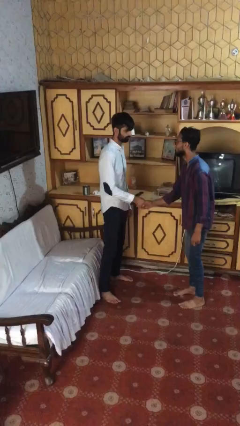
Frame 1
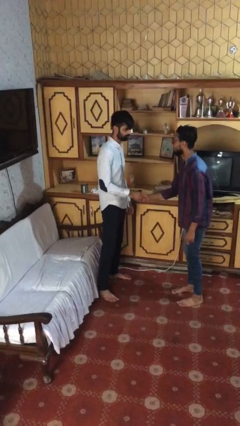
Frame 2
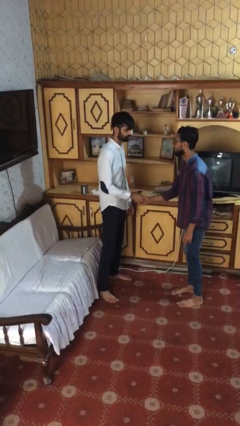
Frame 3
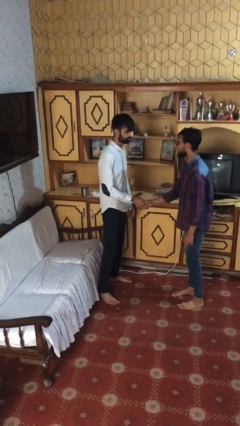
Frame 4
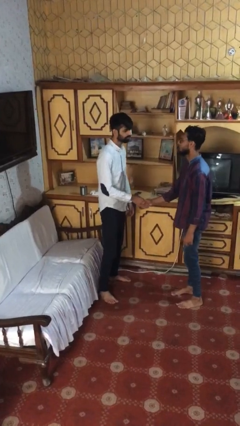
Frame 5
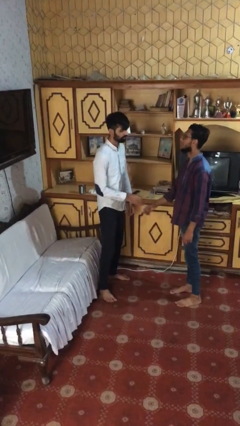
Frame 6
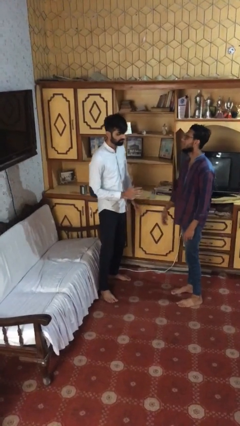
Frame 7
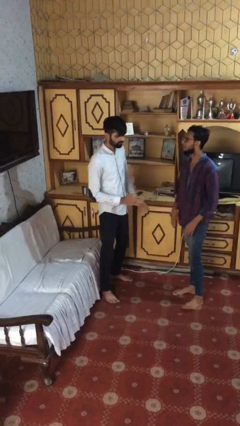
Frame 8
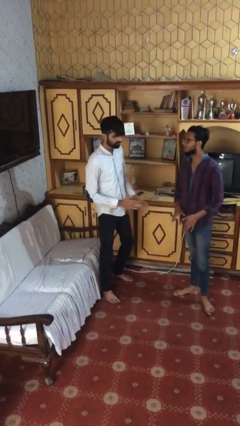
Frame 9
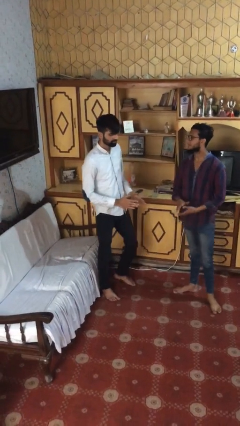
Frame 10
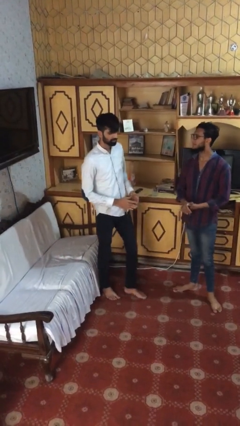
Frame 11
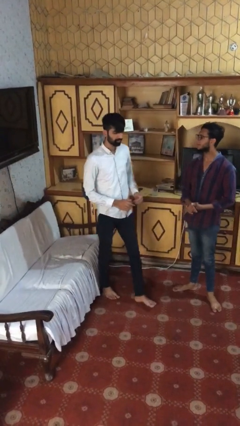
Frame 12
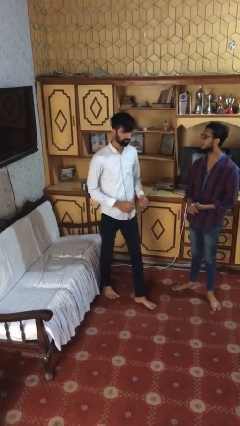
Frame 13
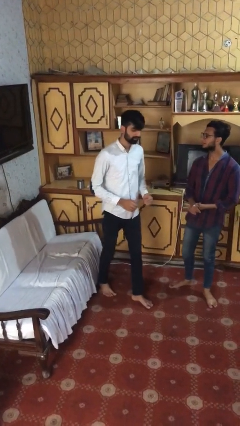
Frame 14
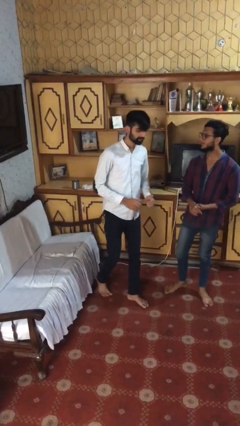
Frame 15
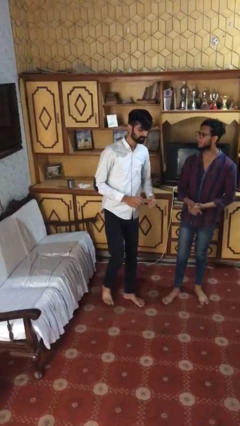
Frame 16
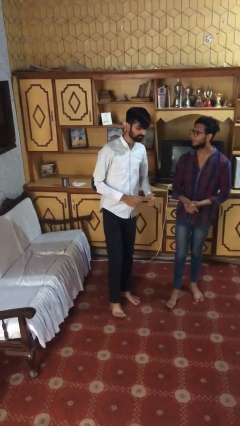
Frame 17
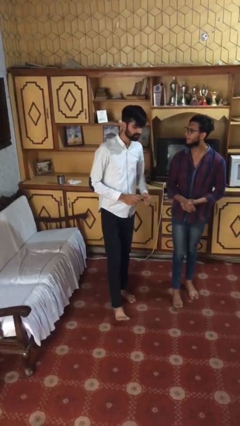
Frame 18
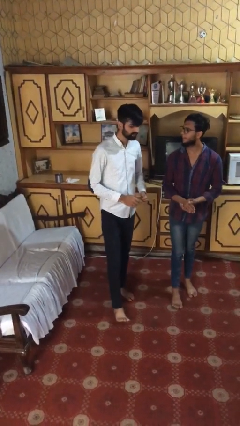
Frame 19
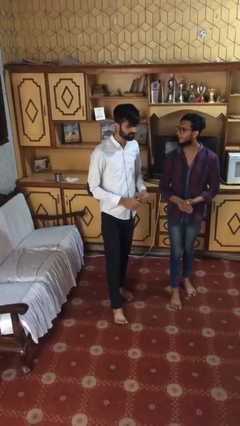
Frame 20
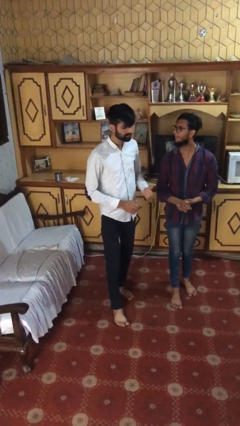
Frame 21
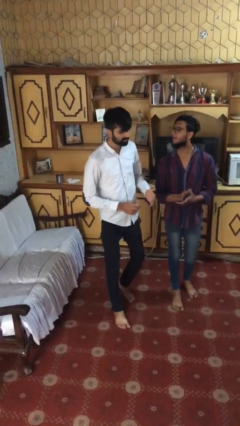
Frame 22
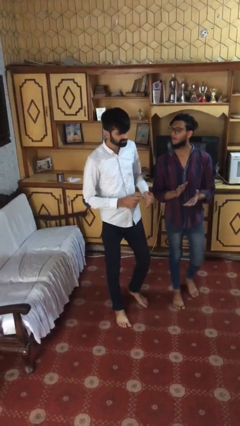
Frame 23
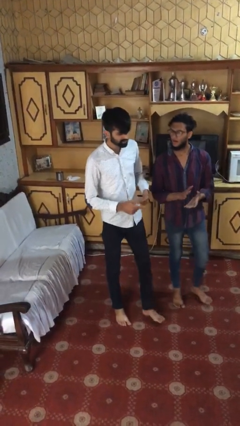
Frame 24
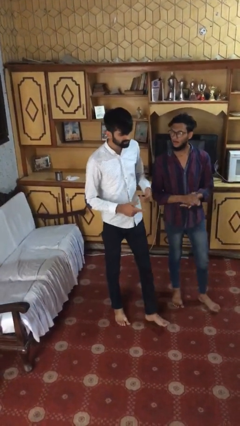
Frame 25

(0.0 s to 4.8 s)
person talks to person

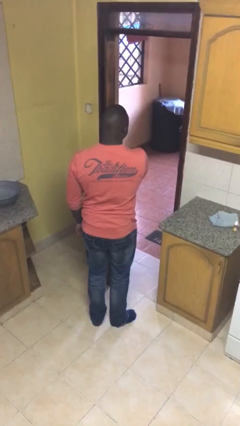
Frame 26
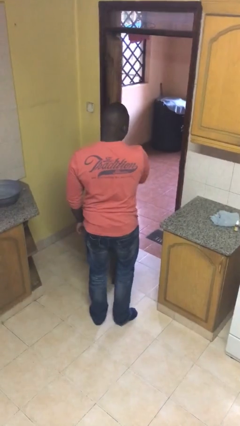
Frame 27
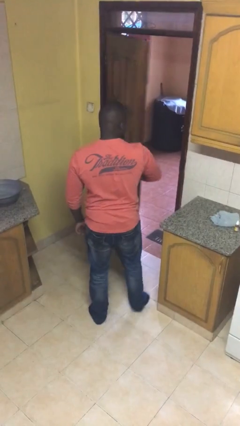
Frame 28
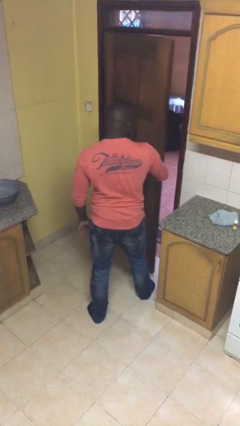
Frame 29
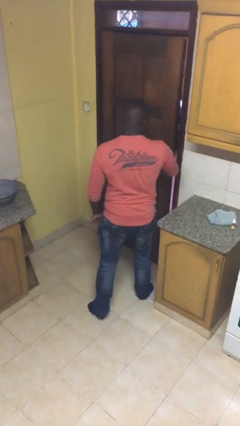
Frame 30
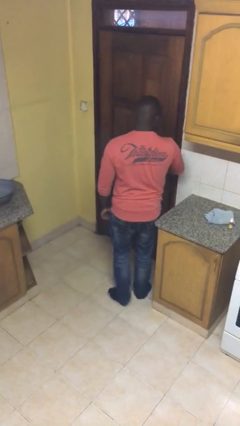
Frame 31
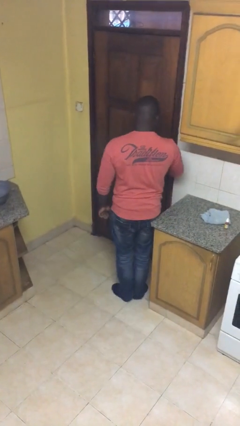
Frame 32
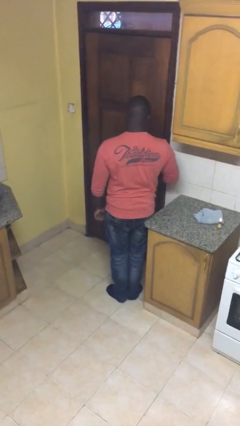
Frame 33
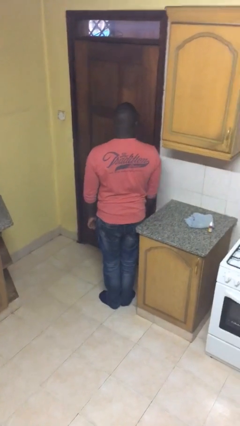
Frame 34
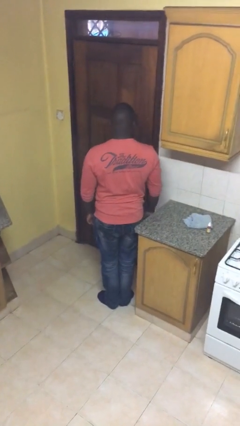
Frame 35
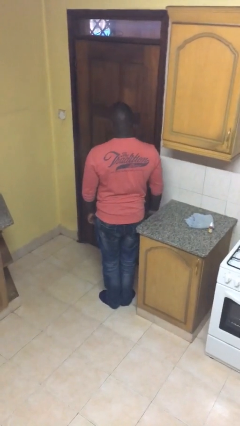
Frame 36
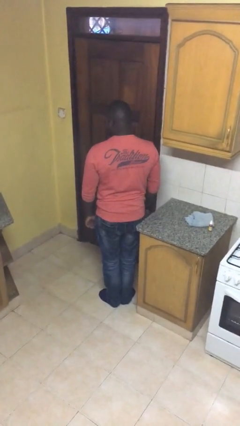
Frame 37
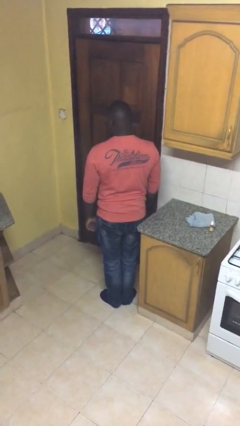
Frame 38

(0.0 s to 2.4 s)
person closes facility door

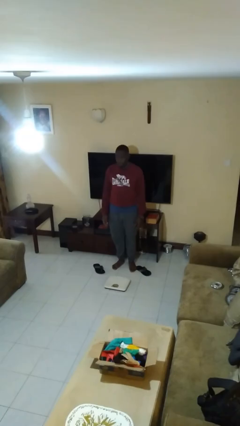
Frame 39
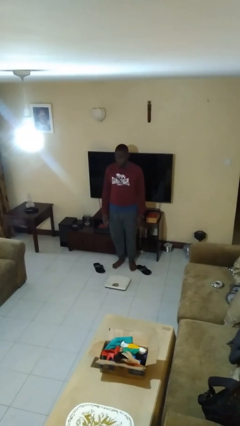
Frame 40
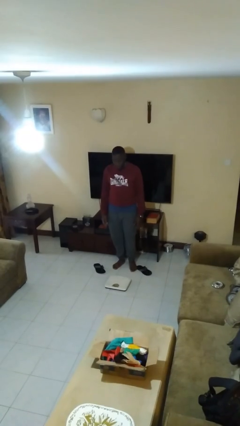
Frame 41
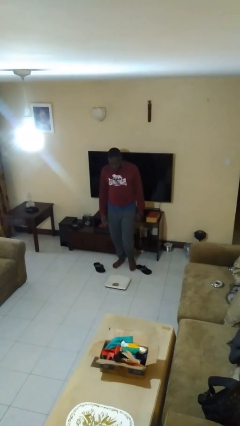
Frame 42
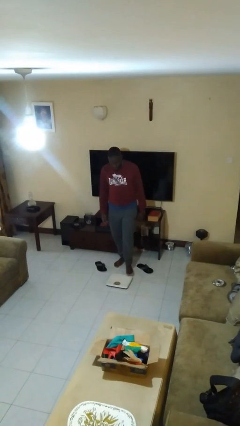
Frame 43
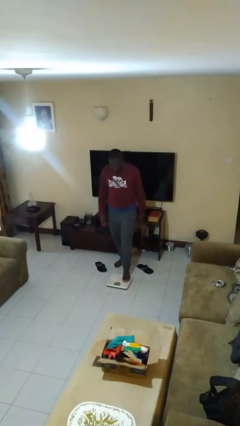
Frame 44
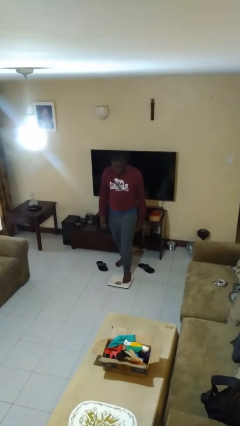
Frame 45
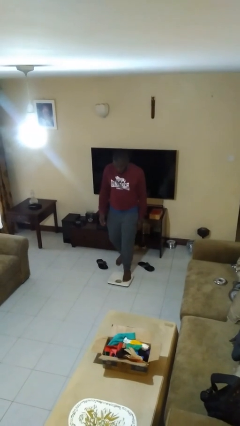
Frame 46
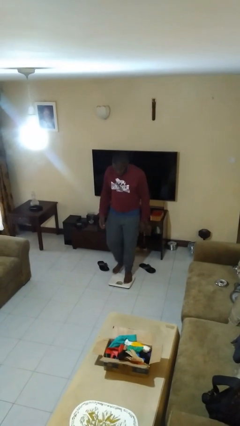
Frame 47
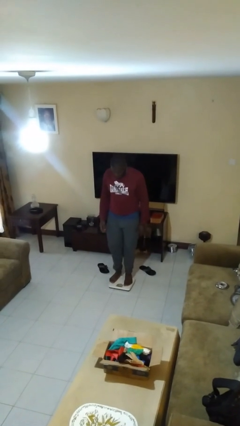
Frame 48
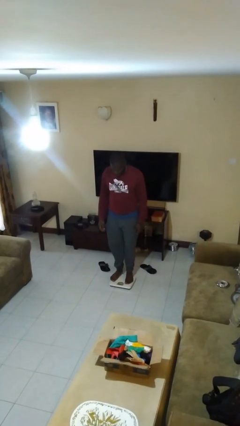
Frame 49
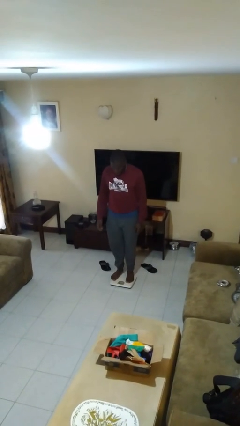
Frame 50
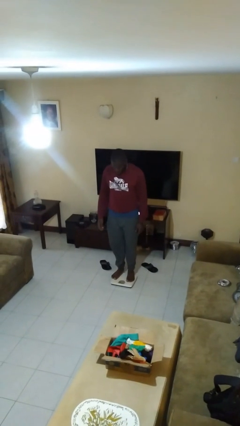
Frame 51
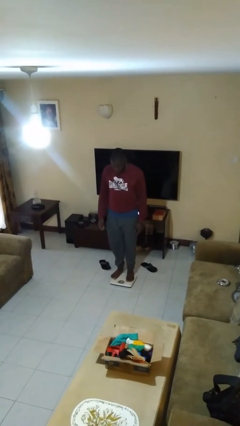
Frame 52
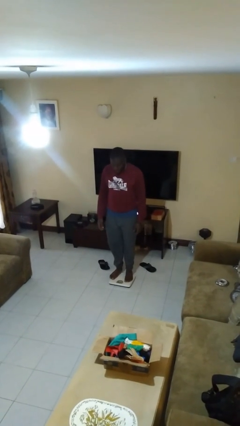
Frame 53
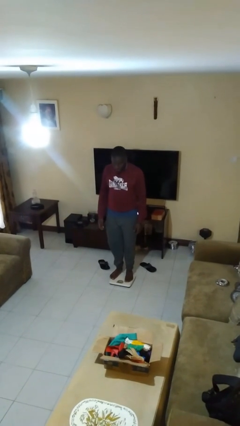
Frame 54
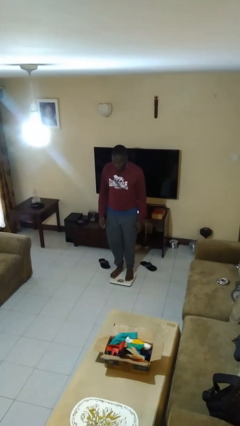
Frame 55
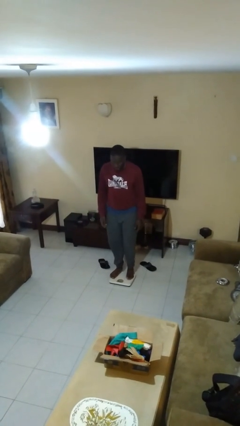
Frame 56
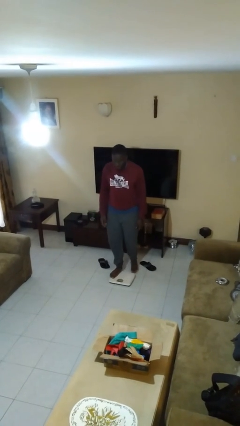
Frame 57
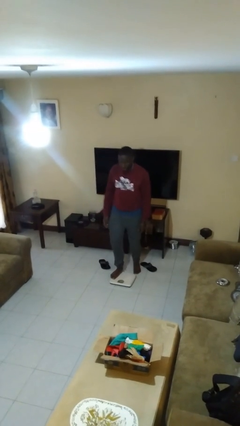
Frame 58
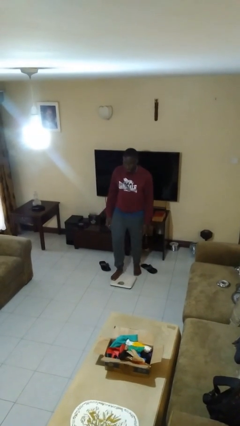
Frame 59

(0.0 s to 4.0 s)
person uses bodyweight scale

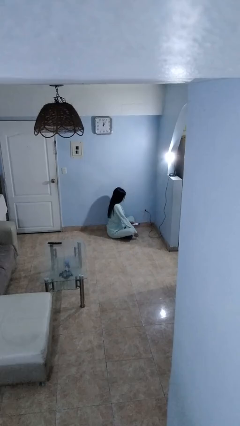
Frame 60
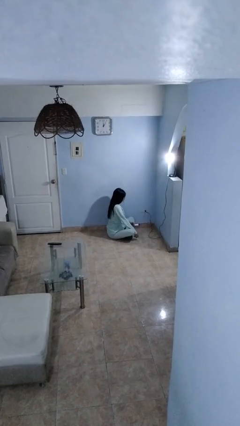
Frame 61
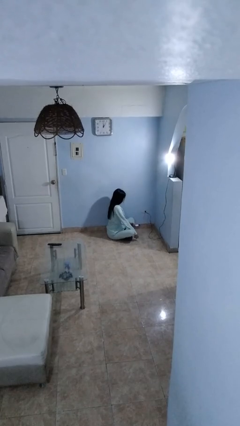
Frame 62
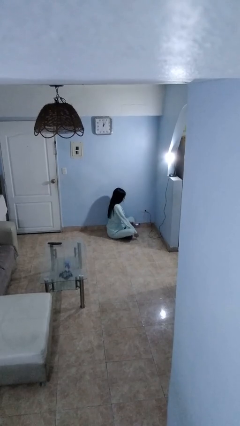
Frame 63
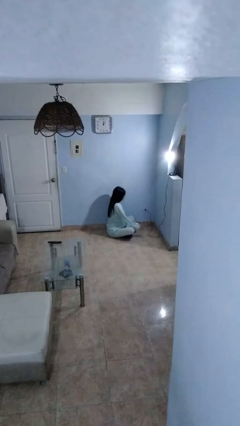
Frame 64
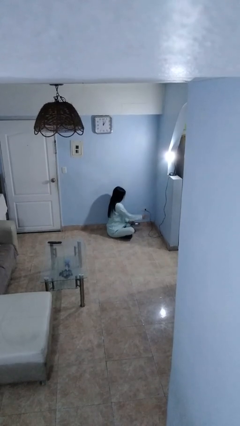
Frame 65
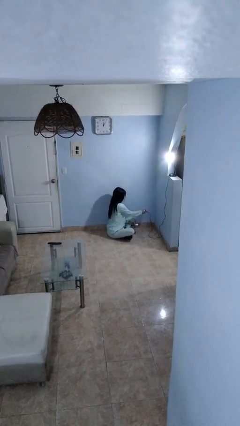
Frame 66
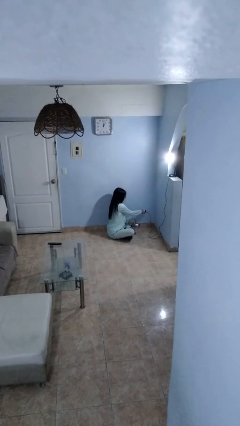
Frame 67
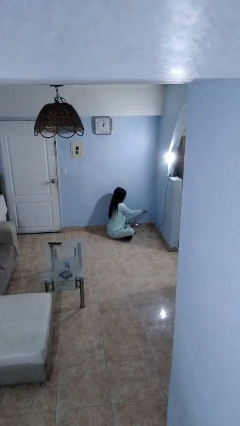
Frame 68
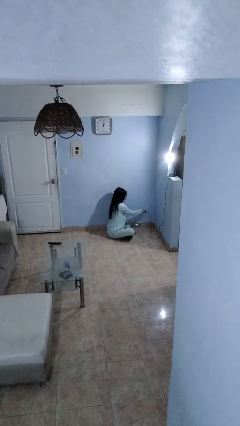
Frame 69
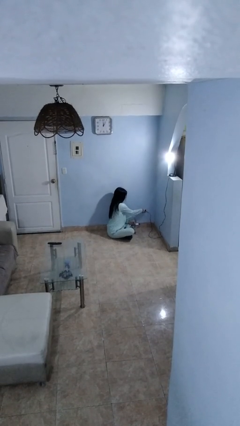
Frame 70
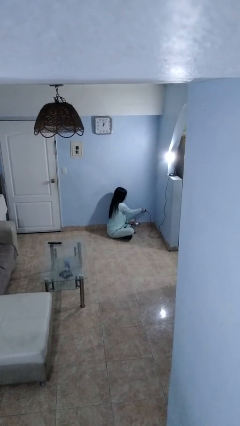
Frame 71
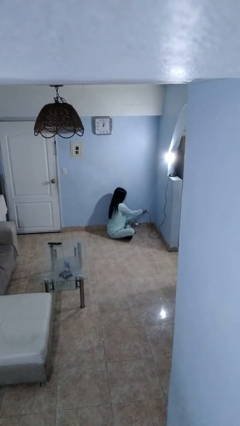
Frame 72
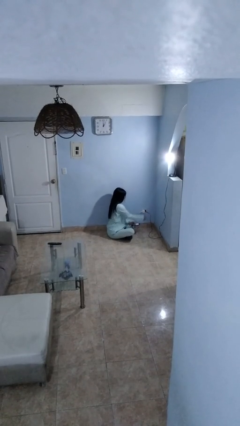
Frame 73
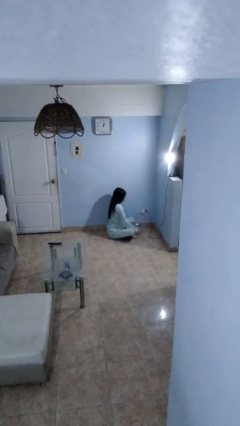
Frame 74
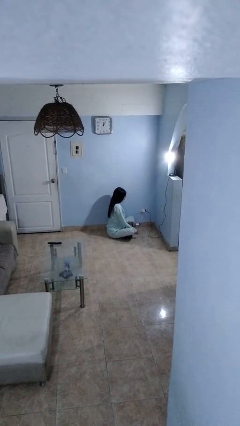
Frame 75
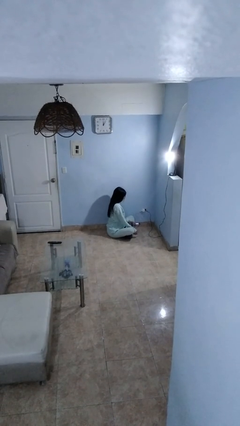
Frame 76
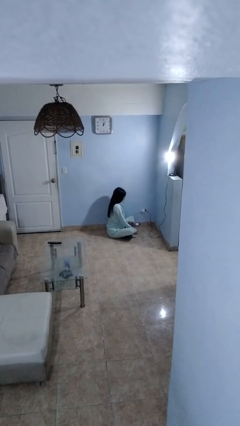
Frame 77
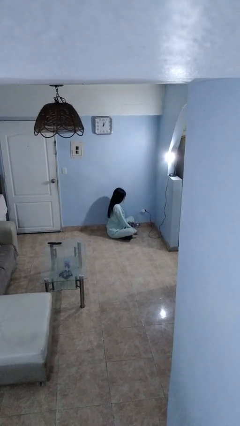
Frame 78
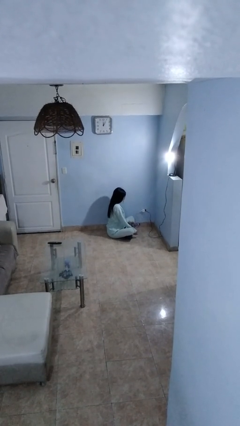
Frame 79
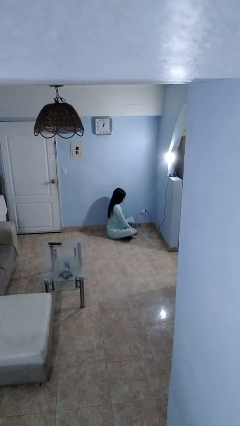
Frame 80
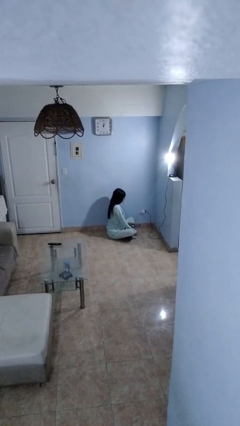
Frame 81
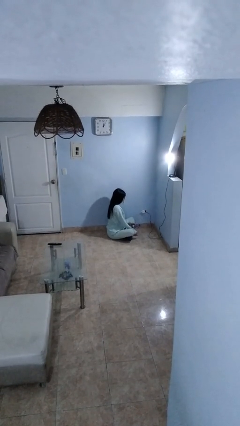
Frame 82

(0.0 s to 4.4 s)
person plugs into electrical socket

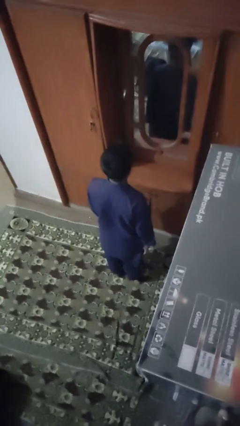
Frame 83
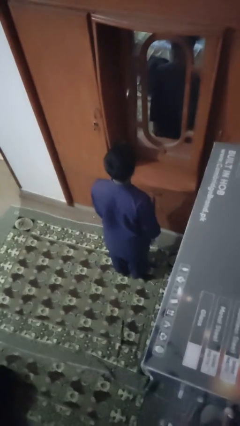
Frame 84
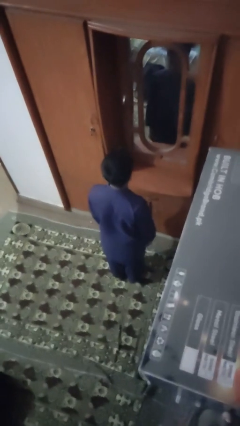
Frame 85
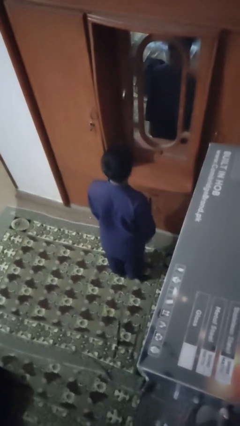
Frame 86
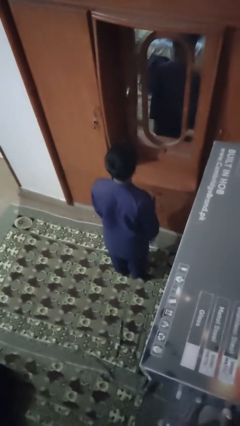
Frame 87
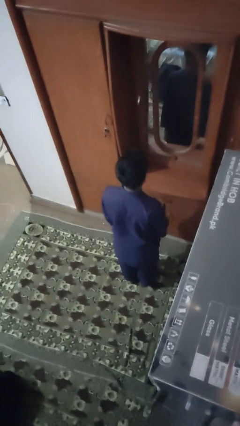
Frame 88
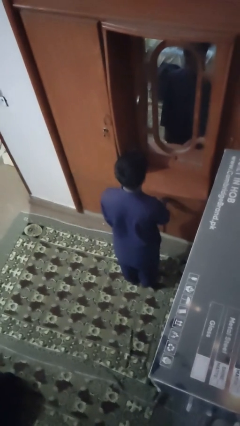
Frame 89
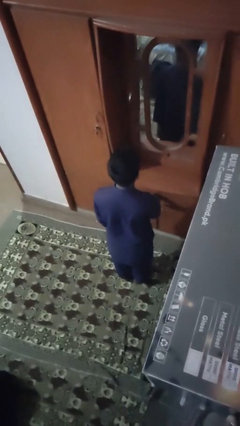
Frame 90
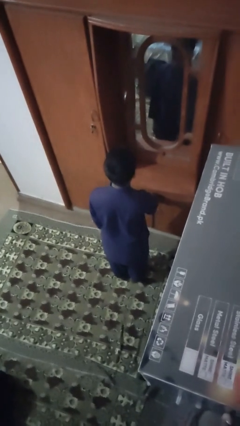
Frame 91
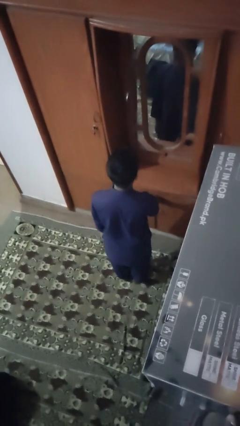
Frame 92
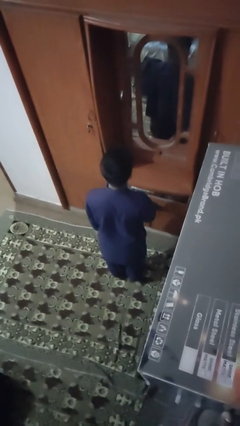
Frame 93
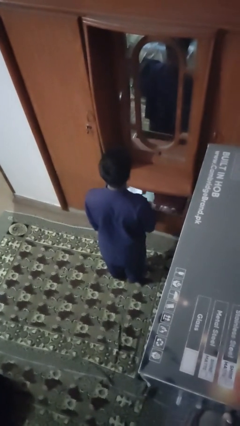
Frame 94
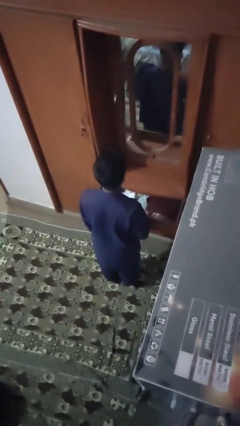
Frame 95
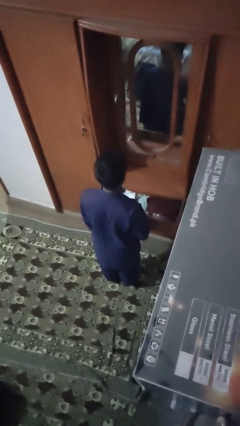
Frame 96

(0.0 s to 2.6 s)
person opens dresser drawer
